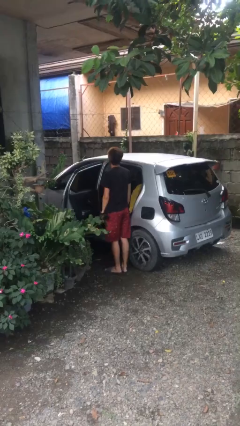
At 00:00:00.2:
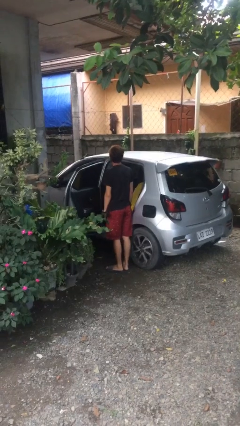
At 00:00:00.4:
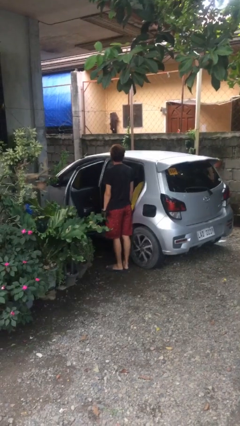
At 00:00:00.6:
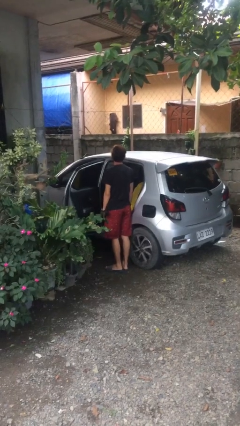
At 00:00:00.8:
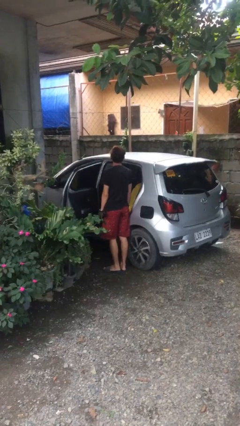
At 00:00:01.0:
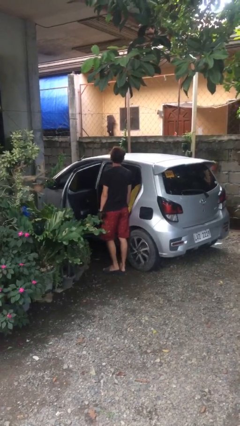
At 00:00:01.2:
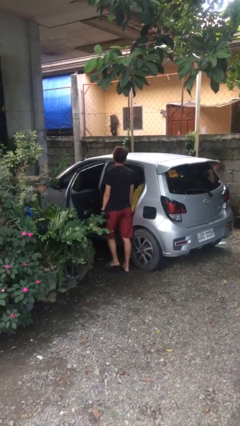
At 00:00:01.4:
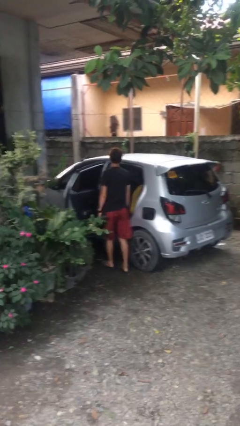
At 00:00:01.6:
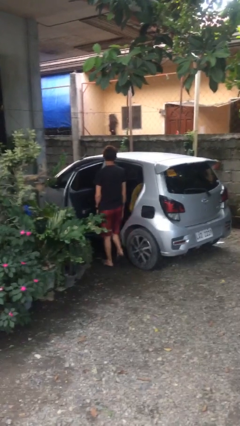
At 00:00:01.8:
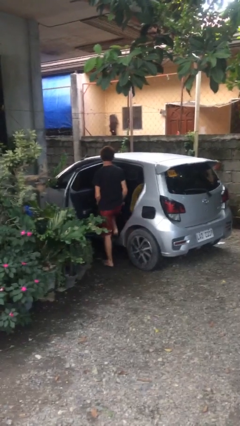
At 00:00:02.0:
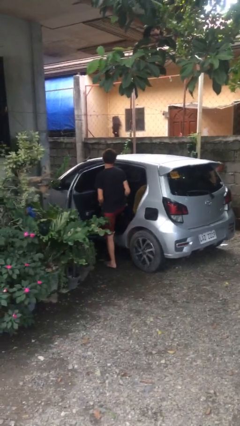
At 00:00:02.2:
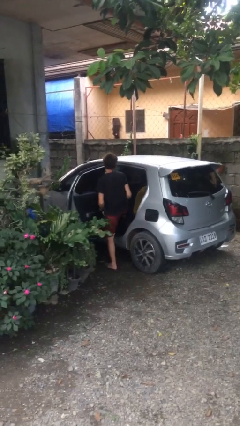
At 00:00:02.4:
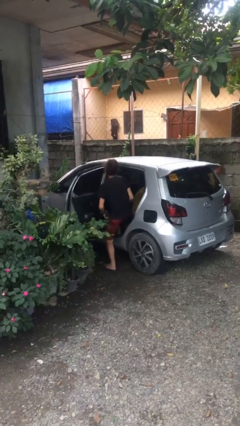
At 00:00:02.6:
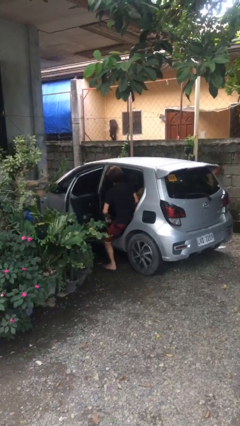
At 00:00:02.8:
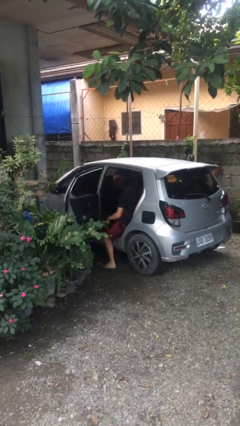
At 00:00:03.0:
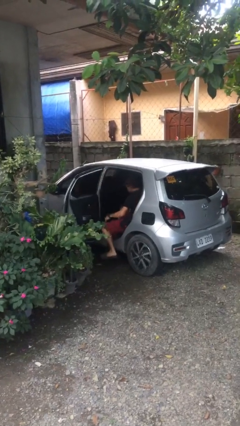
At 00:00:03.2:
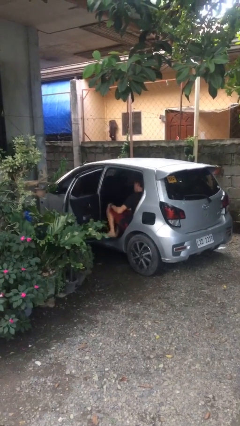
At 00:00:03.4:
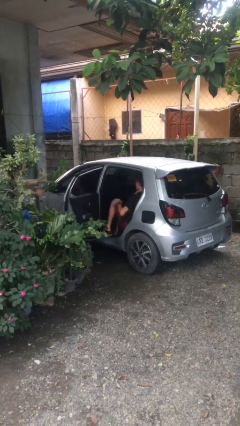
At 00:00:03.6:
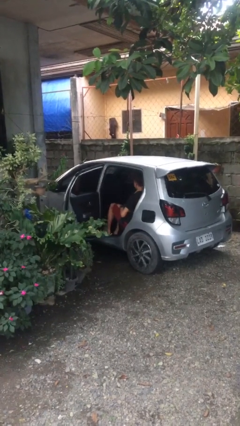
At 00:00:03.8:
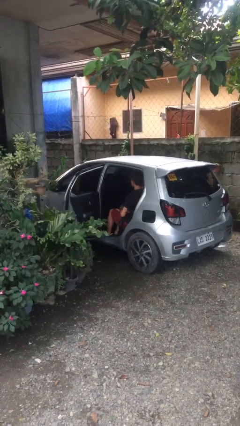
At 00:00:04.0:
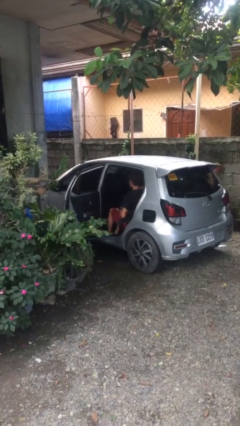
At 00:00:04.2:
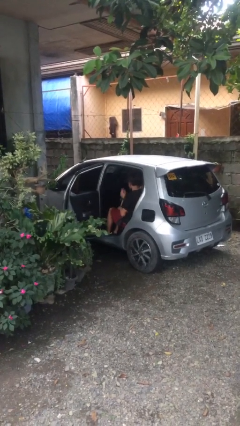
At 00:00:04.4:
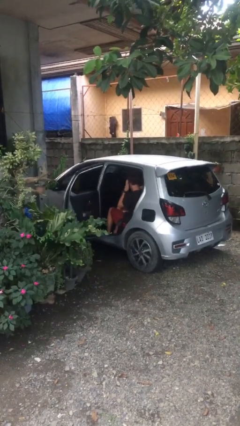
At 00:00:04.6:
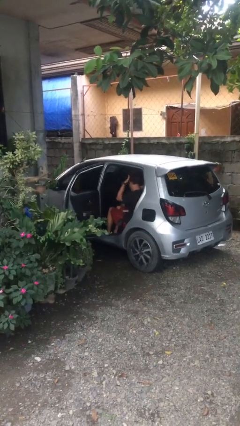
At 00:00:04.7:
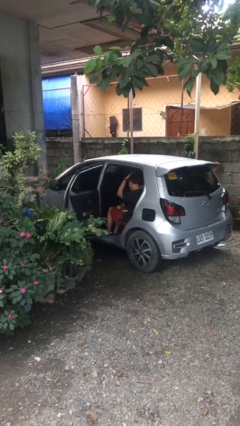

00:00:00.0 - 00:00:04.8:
person enters car

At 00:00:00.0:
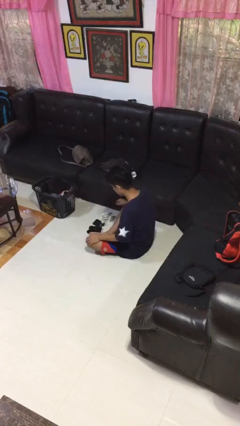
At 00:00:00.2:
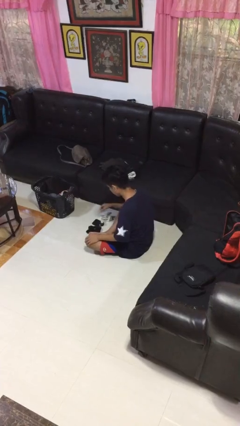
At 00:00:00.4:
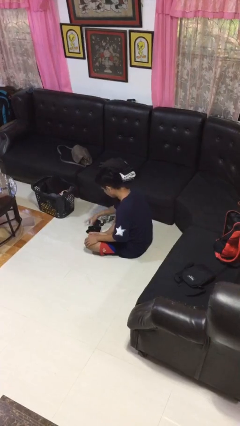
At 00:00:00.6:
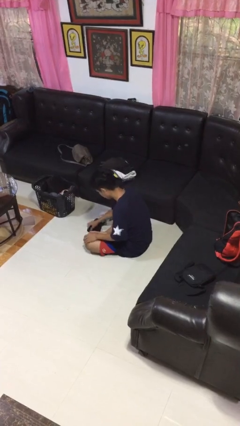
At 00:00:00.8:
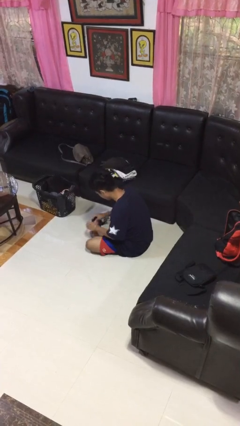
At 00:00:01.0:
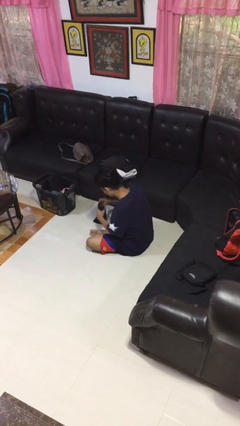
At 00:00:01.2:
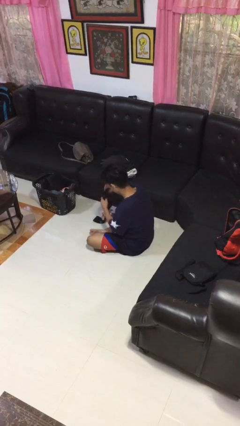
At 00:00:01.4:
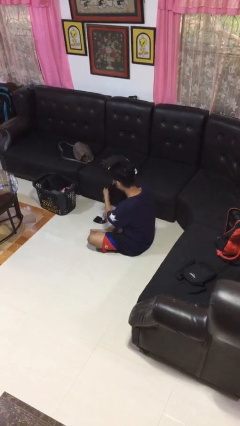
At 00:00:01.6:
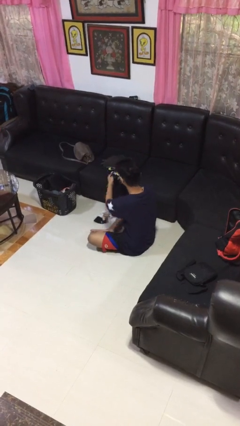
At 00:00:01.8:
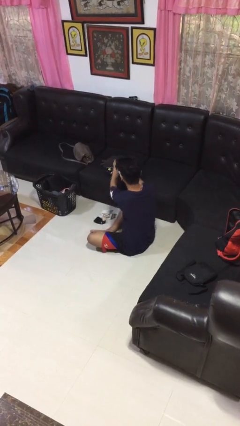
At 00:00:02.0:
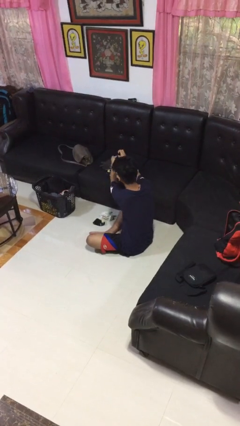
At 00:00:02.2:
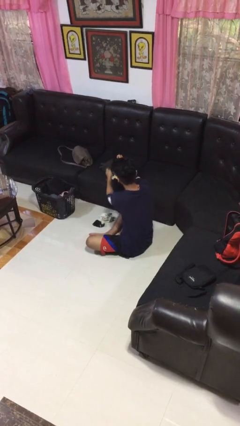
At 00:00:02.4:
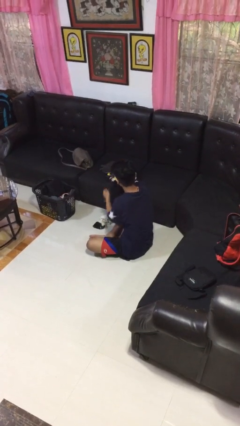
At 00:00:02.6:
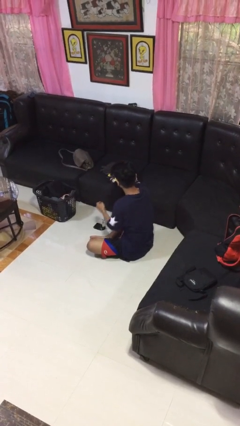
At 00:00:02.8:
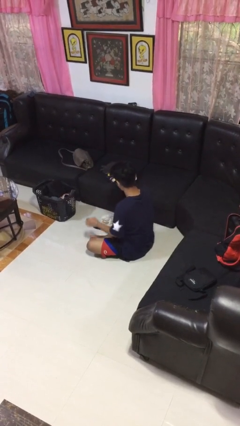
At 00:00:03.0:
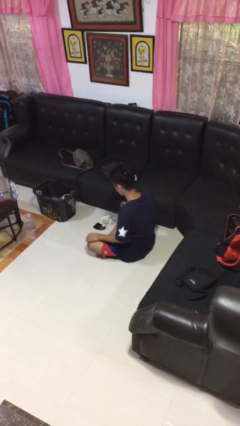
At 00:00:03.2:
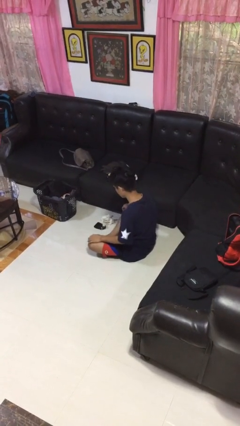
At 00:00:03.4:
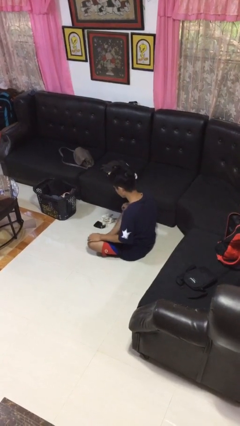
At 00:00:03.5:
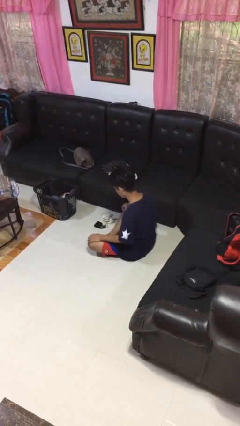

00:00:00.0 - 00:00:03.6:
person folds socks

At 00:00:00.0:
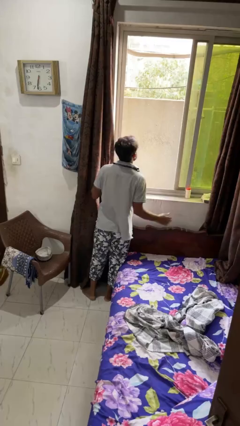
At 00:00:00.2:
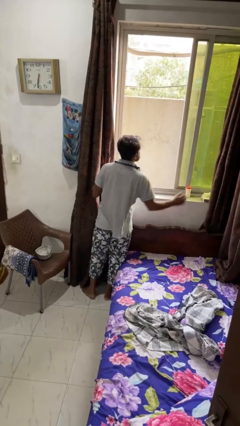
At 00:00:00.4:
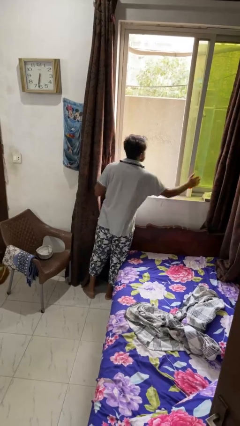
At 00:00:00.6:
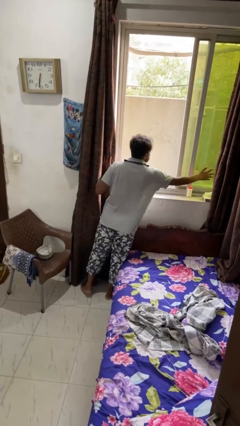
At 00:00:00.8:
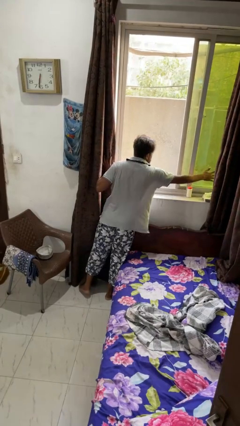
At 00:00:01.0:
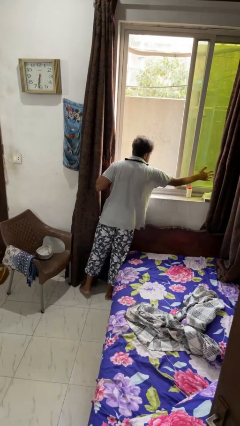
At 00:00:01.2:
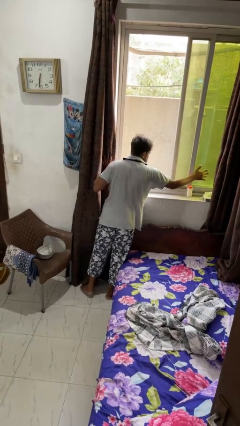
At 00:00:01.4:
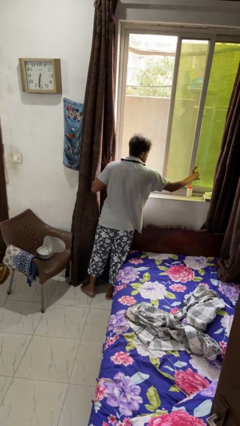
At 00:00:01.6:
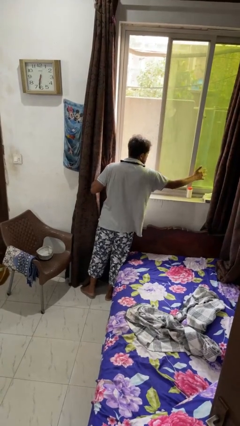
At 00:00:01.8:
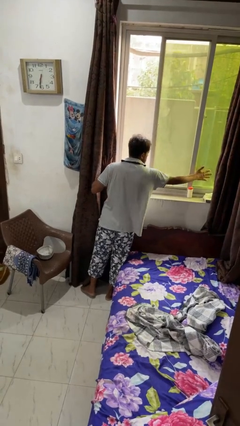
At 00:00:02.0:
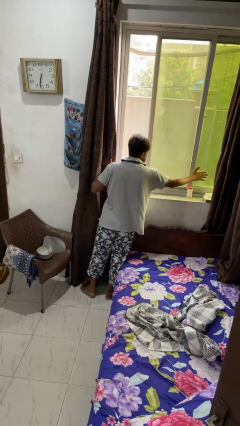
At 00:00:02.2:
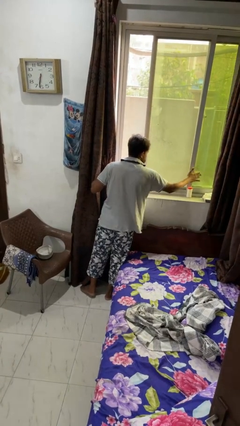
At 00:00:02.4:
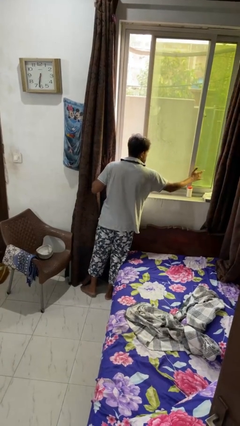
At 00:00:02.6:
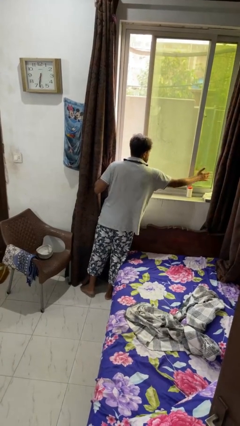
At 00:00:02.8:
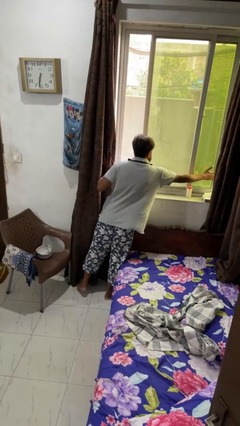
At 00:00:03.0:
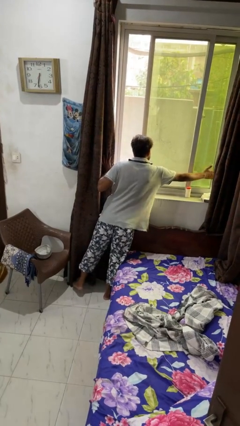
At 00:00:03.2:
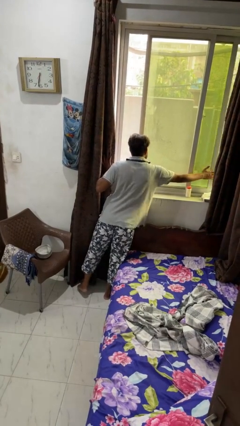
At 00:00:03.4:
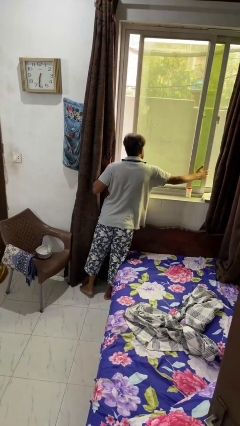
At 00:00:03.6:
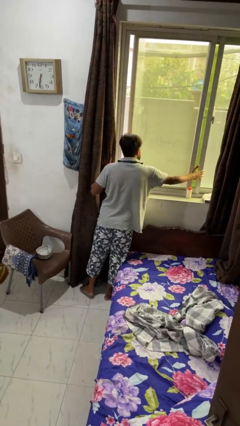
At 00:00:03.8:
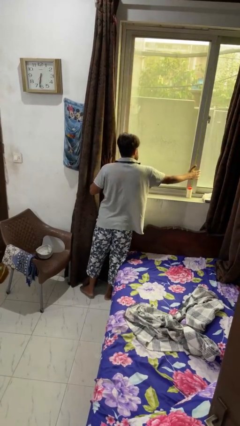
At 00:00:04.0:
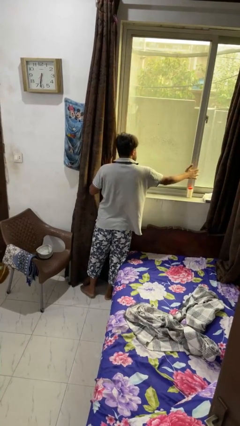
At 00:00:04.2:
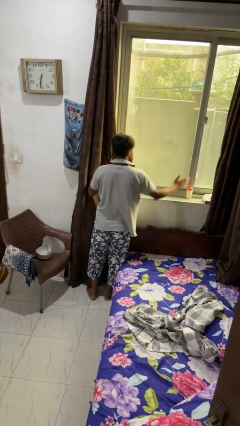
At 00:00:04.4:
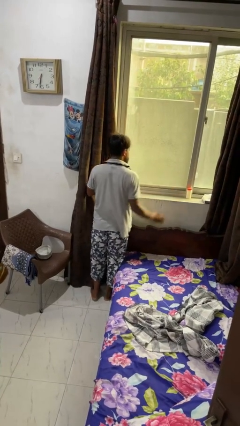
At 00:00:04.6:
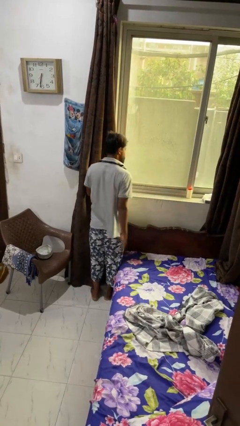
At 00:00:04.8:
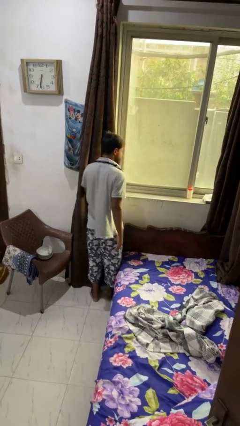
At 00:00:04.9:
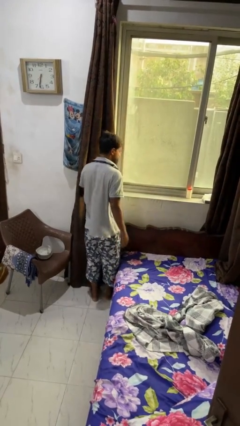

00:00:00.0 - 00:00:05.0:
person closes home window

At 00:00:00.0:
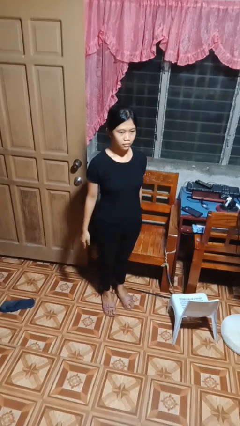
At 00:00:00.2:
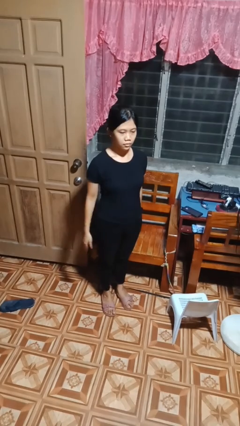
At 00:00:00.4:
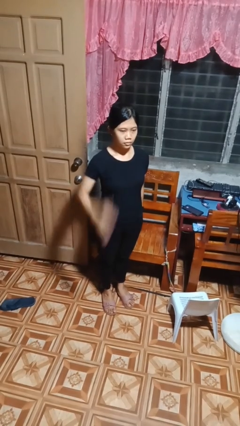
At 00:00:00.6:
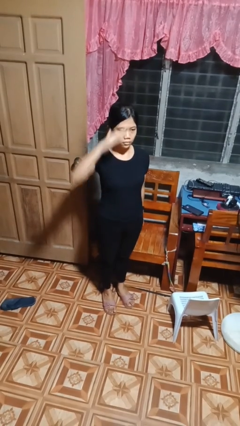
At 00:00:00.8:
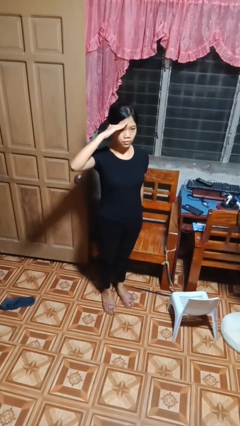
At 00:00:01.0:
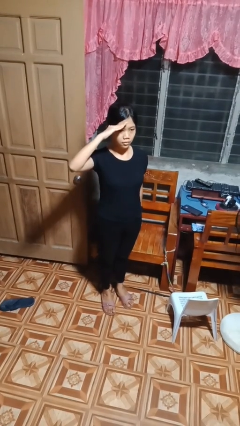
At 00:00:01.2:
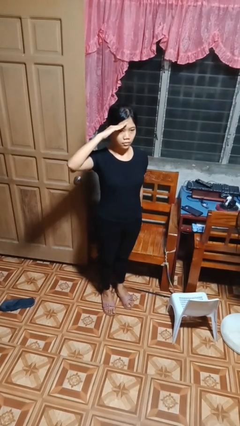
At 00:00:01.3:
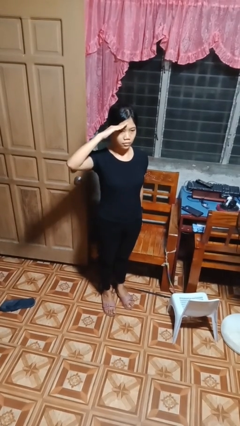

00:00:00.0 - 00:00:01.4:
person salutes

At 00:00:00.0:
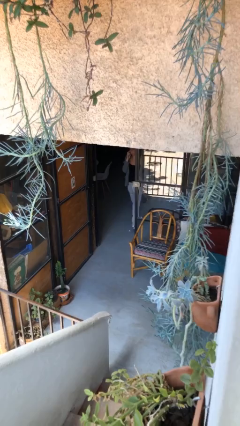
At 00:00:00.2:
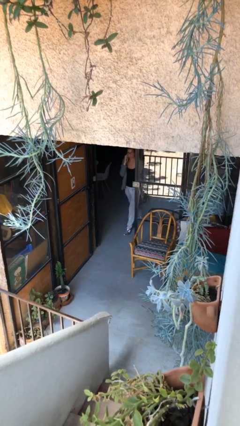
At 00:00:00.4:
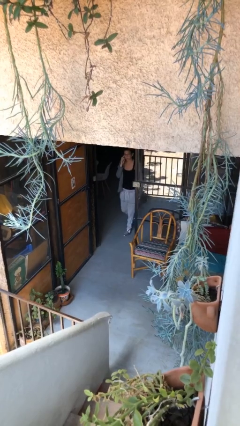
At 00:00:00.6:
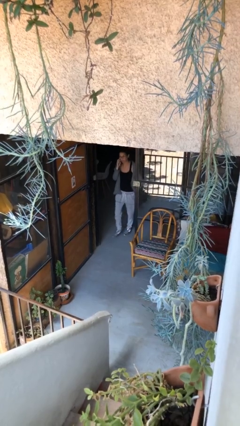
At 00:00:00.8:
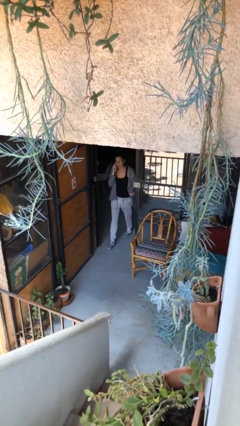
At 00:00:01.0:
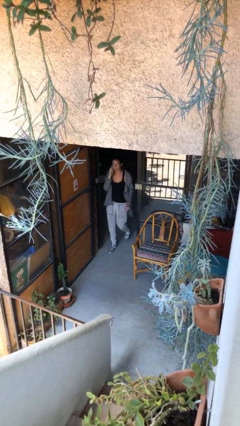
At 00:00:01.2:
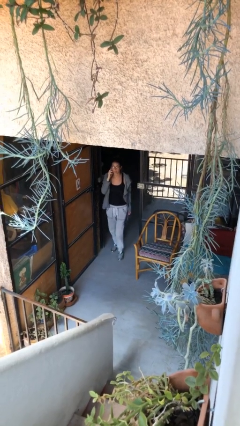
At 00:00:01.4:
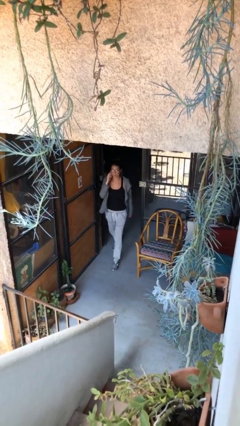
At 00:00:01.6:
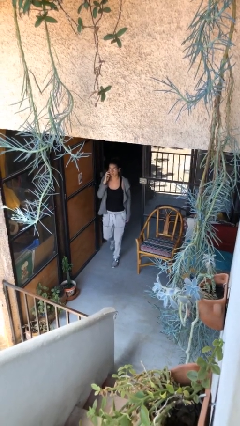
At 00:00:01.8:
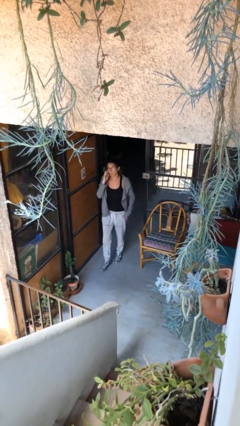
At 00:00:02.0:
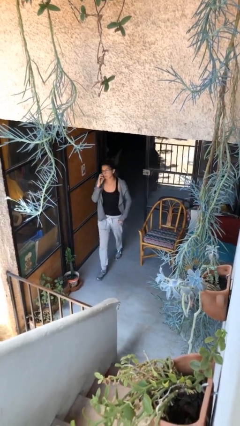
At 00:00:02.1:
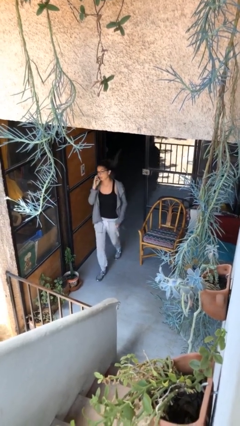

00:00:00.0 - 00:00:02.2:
person enters scene through structure

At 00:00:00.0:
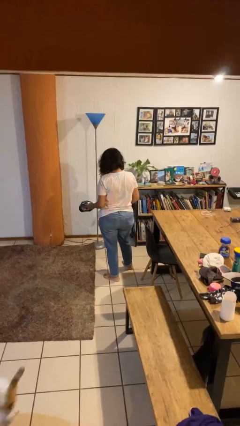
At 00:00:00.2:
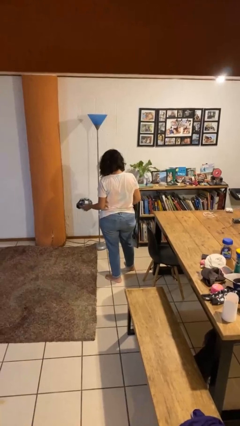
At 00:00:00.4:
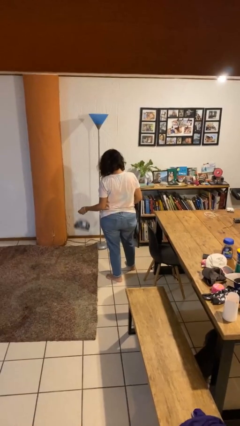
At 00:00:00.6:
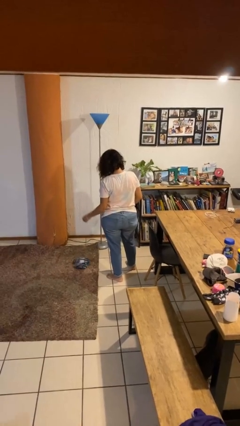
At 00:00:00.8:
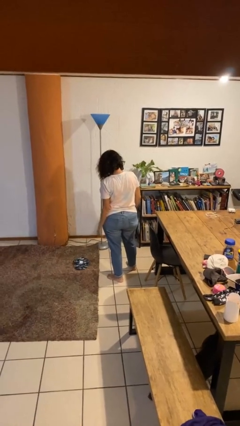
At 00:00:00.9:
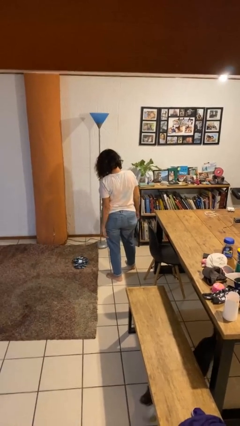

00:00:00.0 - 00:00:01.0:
person throws object to ground
